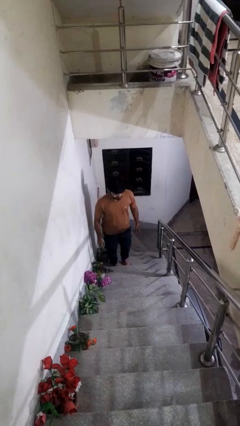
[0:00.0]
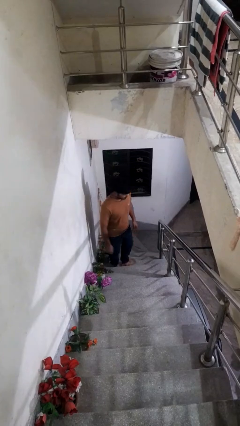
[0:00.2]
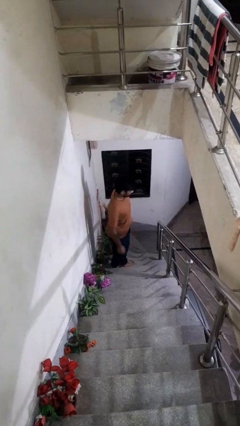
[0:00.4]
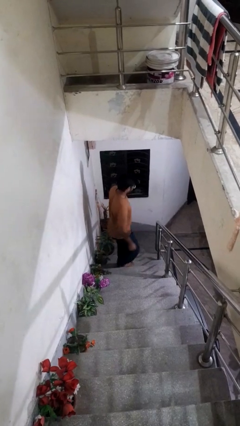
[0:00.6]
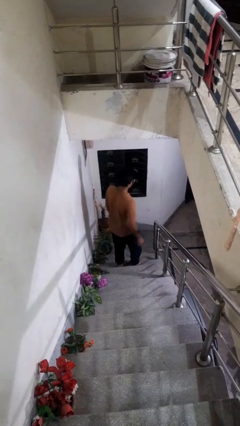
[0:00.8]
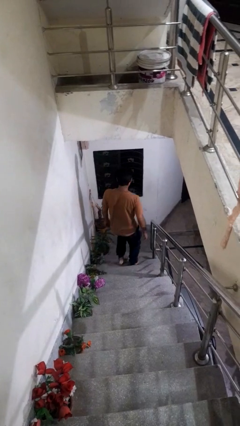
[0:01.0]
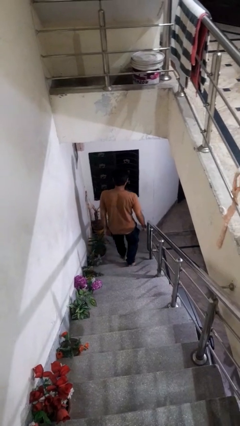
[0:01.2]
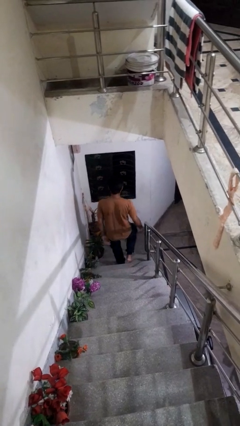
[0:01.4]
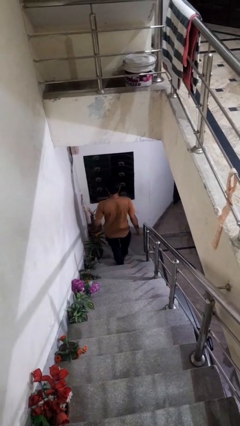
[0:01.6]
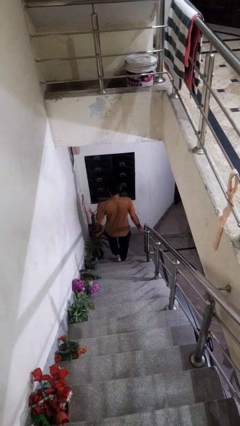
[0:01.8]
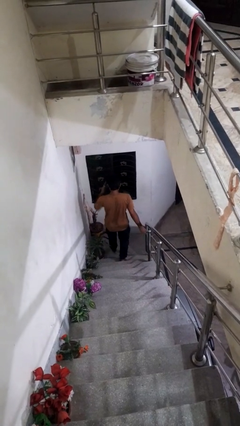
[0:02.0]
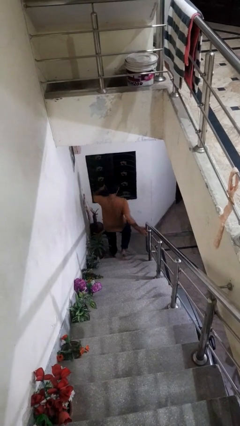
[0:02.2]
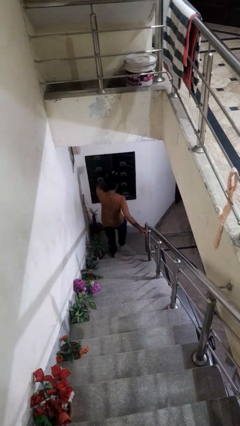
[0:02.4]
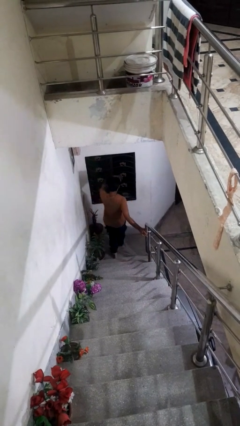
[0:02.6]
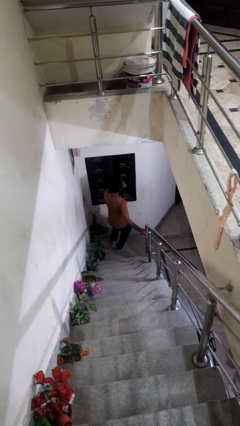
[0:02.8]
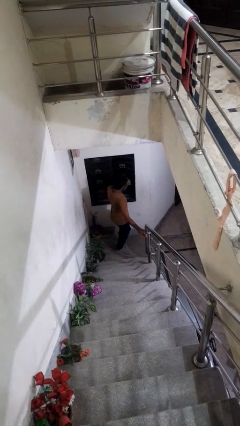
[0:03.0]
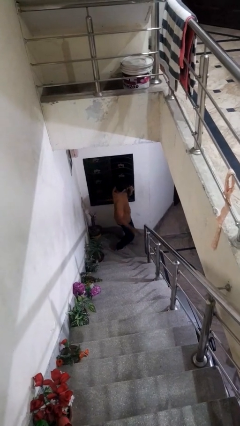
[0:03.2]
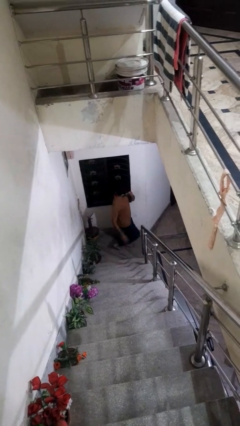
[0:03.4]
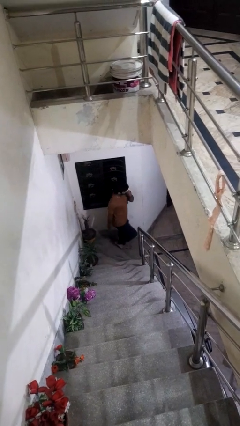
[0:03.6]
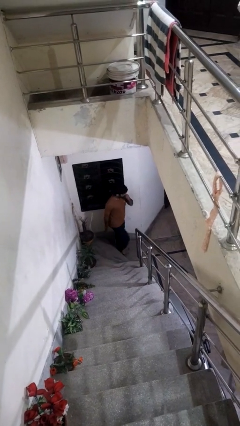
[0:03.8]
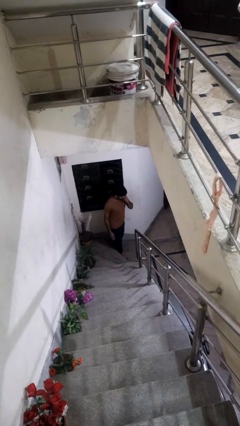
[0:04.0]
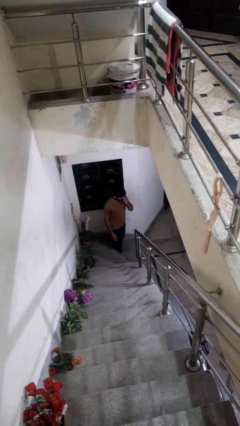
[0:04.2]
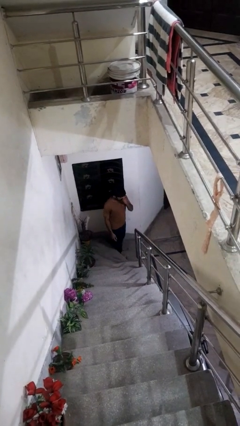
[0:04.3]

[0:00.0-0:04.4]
person climbs down stairs

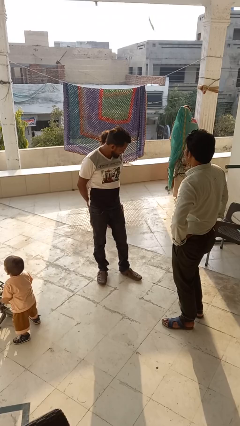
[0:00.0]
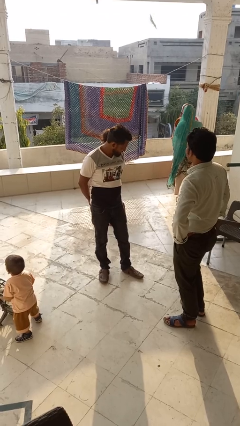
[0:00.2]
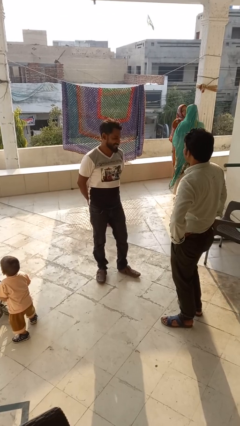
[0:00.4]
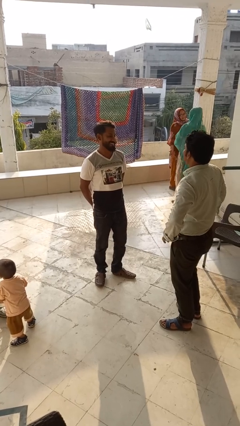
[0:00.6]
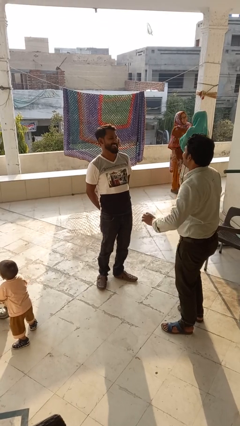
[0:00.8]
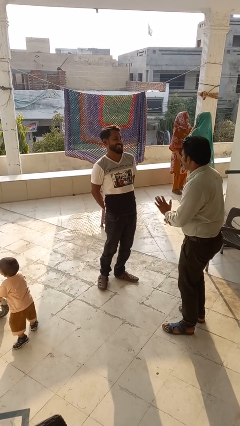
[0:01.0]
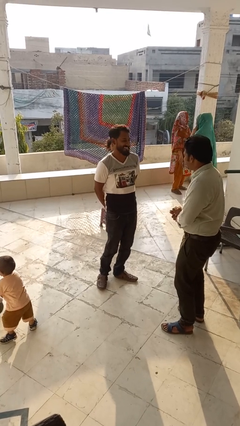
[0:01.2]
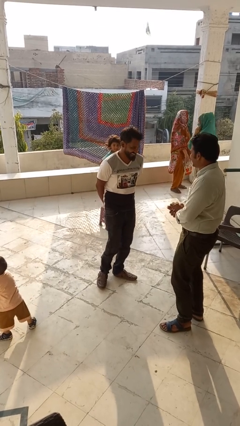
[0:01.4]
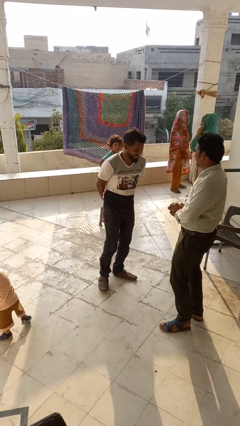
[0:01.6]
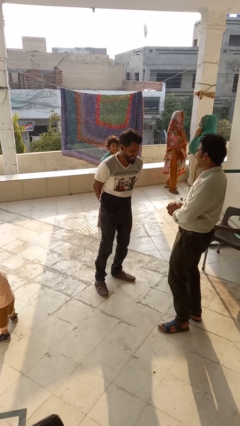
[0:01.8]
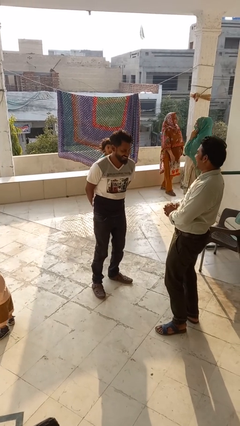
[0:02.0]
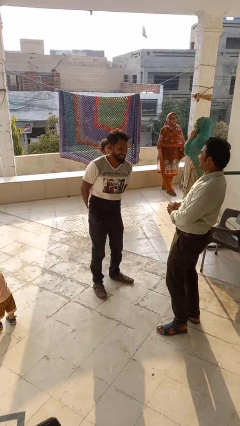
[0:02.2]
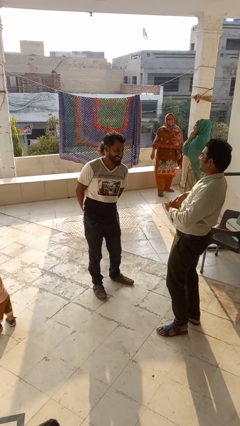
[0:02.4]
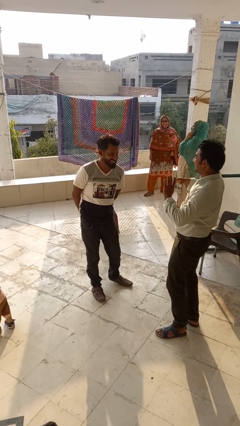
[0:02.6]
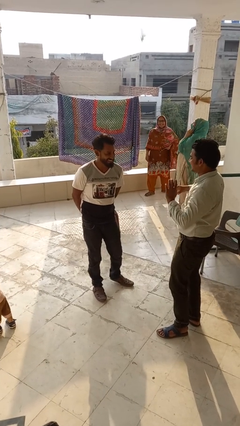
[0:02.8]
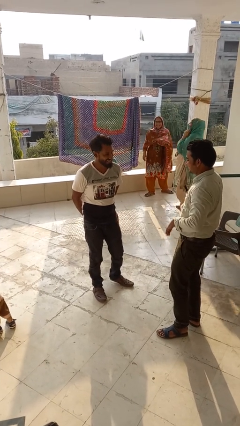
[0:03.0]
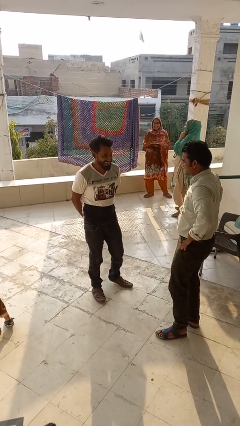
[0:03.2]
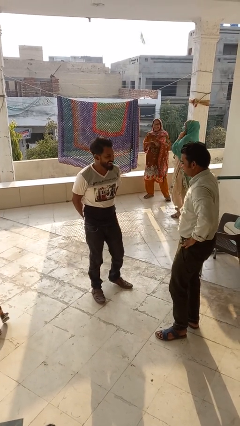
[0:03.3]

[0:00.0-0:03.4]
person laughs with person

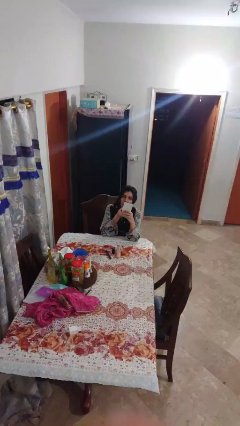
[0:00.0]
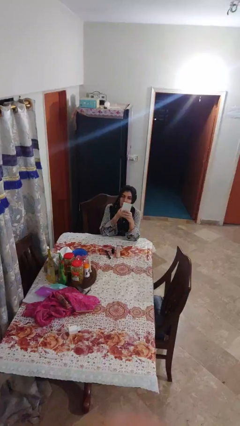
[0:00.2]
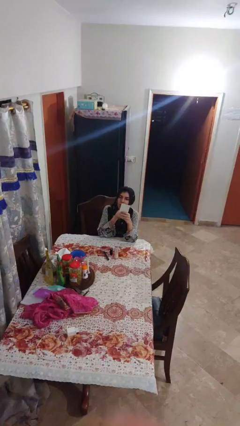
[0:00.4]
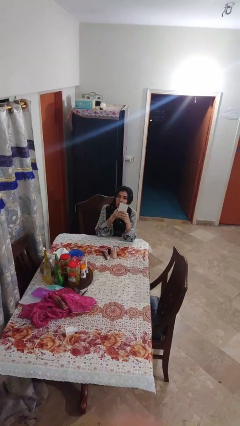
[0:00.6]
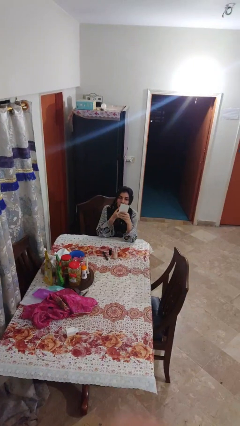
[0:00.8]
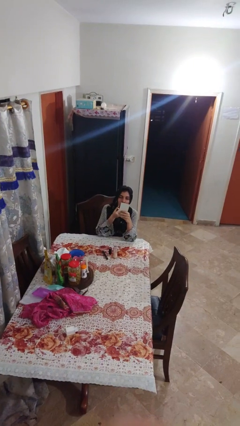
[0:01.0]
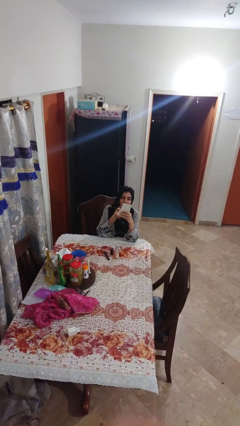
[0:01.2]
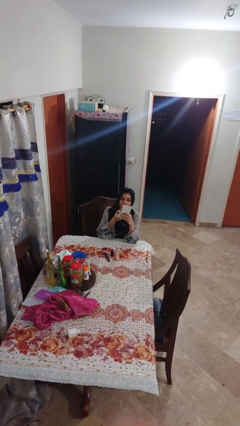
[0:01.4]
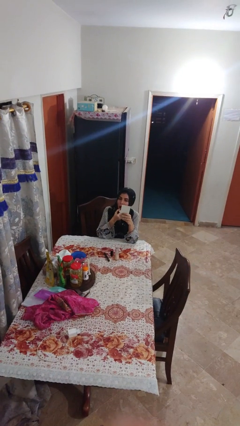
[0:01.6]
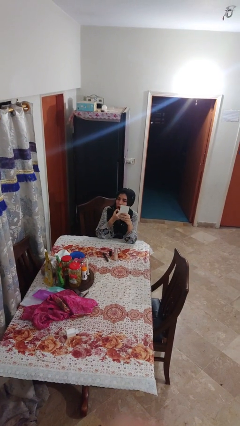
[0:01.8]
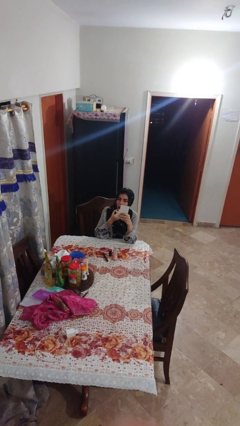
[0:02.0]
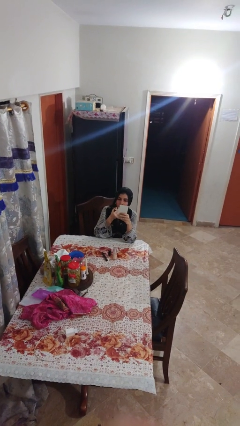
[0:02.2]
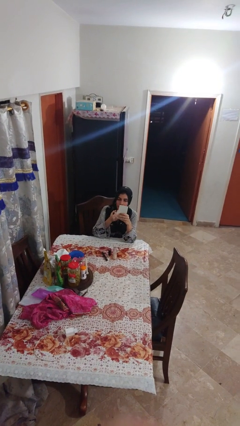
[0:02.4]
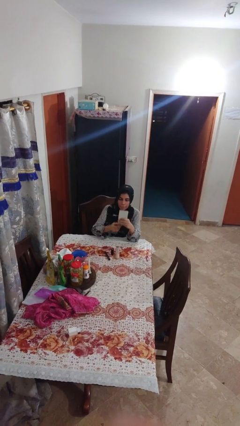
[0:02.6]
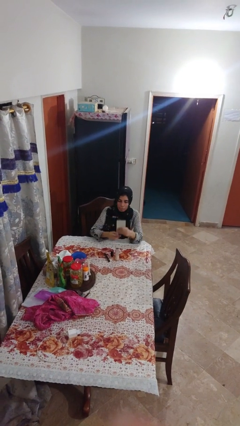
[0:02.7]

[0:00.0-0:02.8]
person applies lip makeup

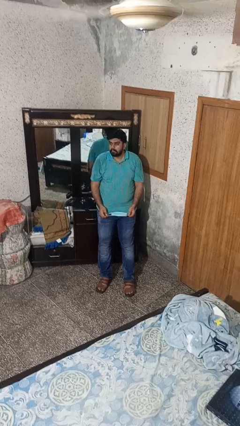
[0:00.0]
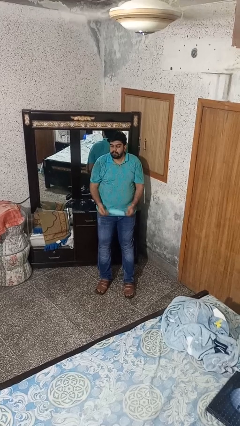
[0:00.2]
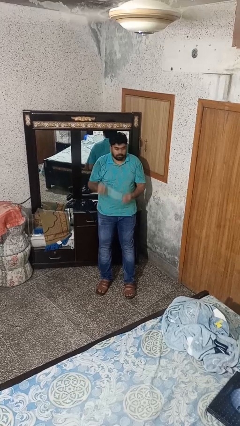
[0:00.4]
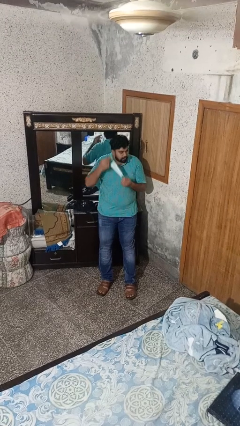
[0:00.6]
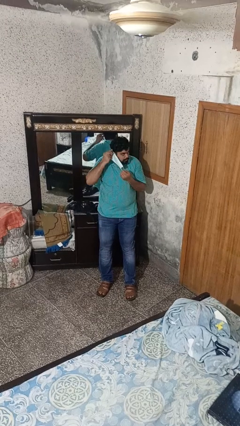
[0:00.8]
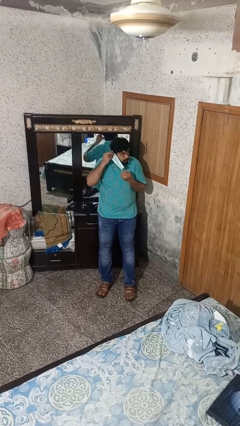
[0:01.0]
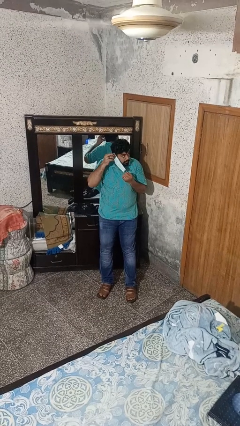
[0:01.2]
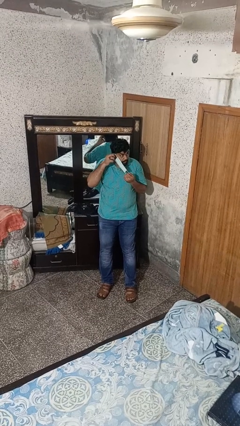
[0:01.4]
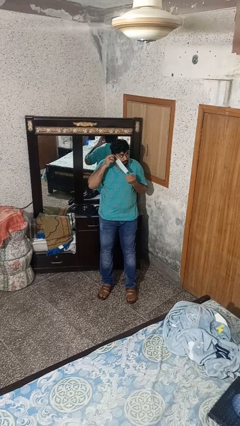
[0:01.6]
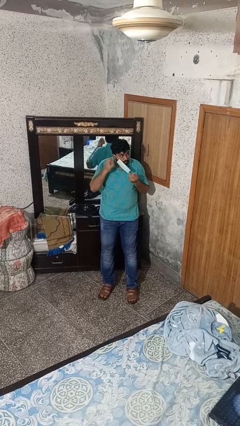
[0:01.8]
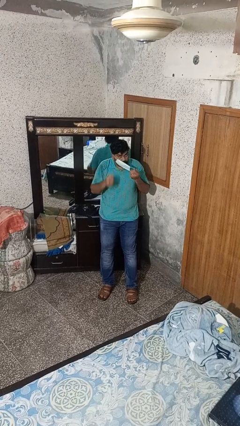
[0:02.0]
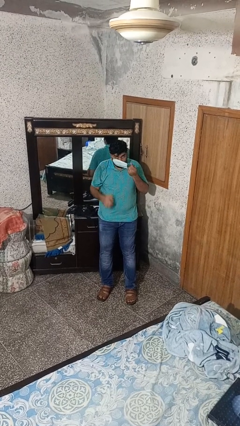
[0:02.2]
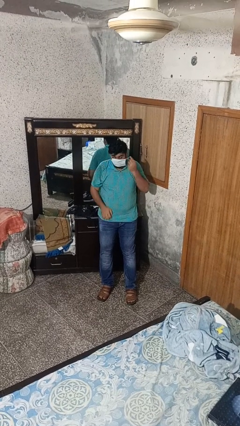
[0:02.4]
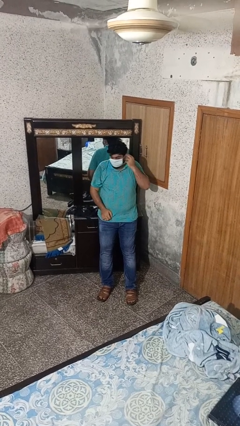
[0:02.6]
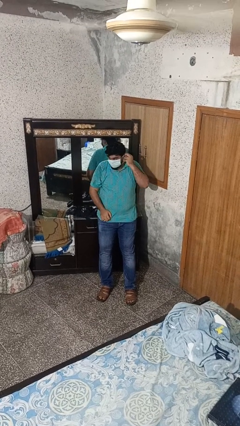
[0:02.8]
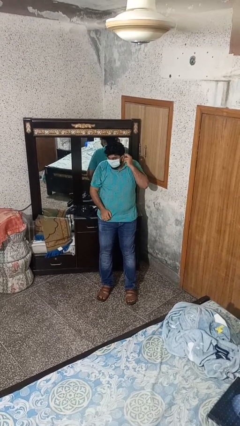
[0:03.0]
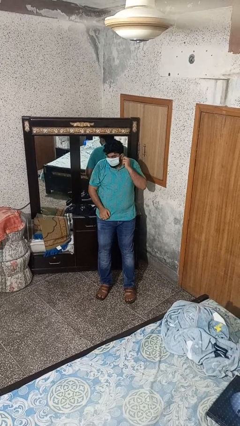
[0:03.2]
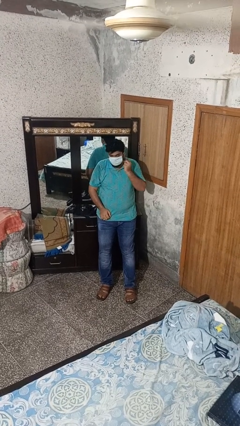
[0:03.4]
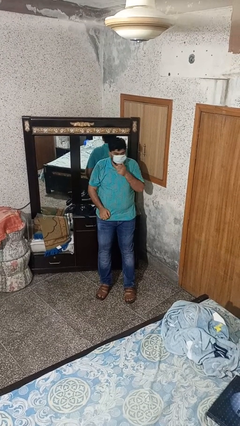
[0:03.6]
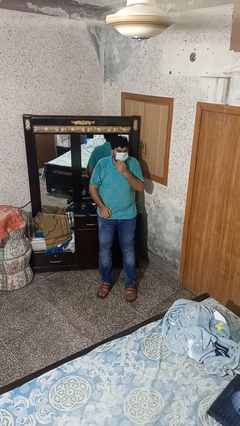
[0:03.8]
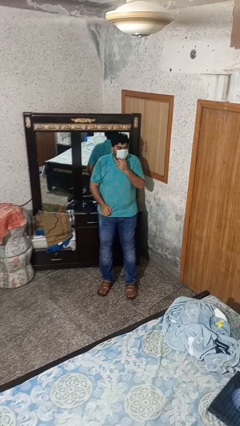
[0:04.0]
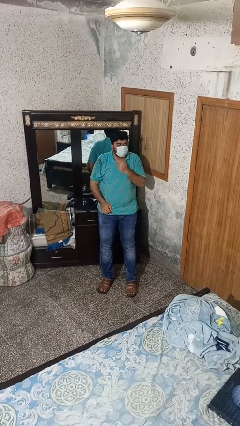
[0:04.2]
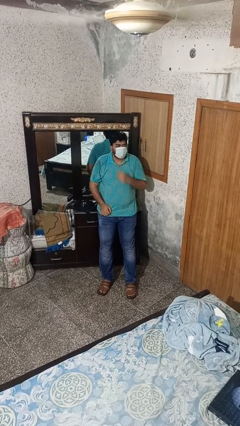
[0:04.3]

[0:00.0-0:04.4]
person puts on facemask

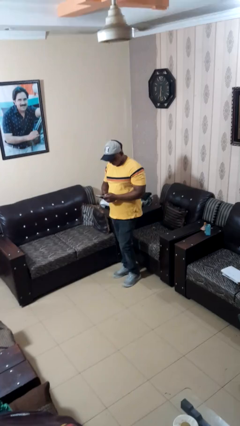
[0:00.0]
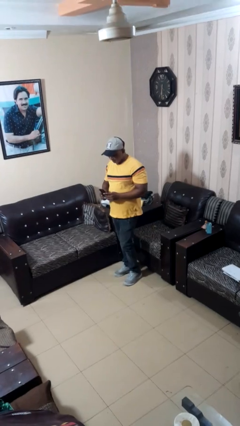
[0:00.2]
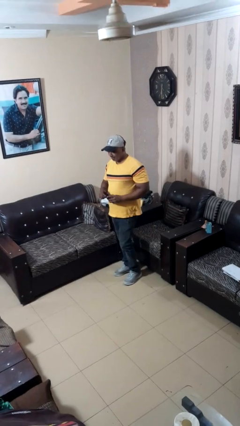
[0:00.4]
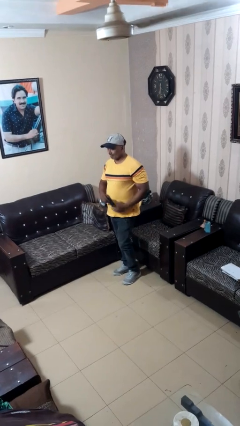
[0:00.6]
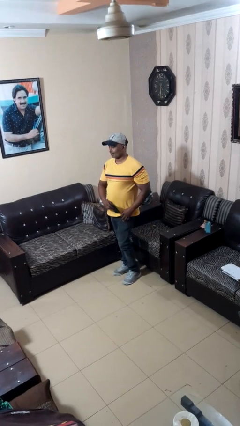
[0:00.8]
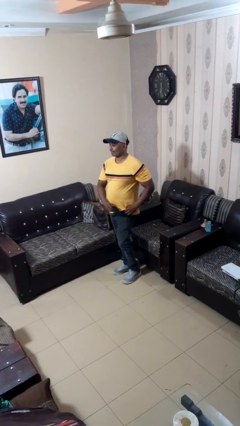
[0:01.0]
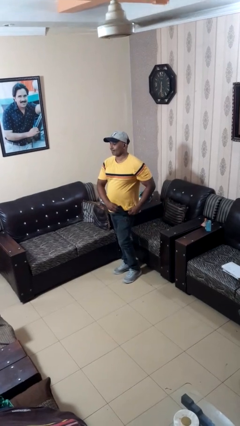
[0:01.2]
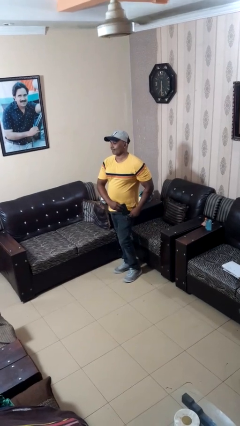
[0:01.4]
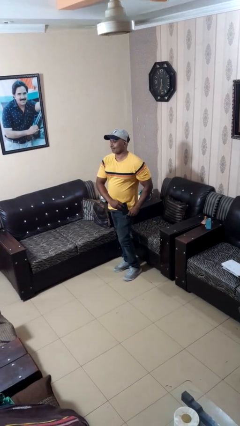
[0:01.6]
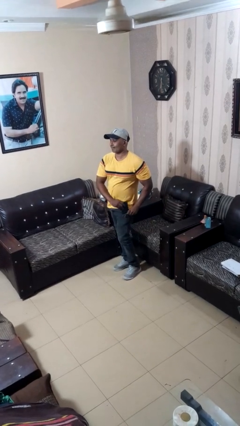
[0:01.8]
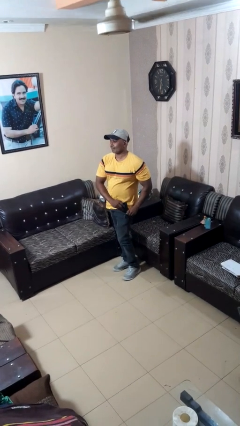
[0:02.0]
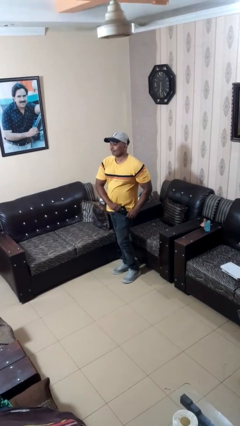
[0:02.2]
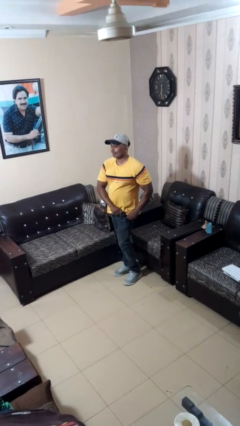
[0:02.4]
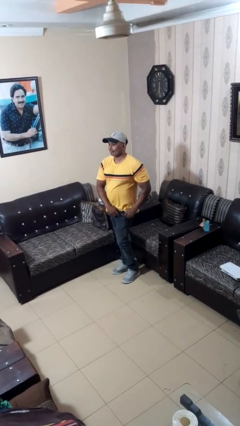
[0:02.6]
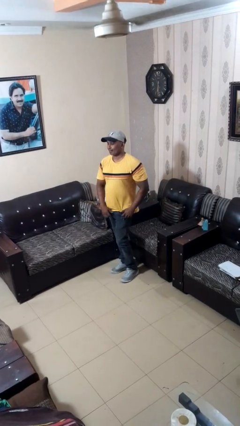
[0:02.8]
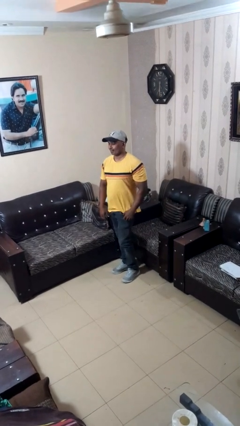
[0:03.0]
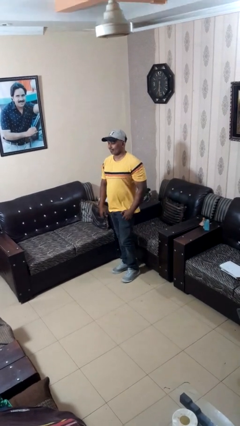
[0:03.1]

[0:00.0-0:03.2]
person puts phone into pocket
